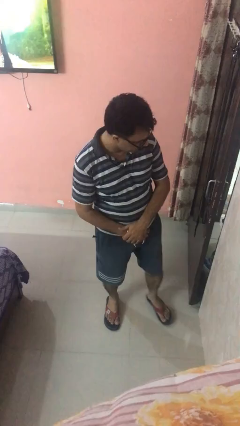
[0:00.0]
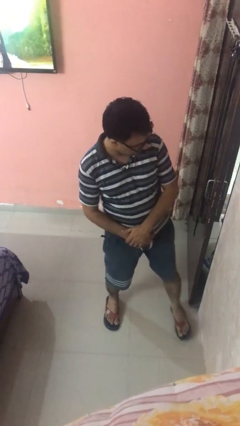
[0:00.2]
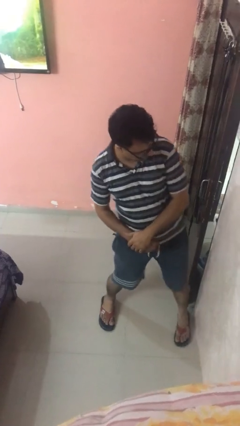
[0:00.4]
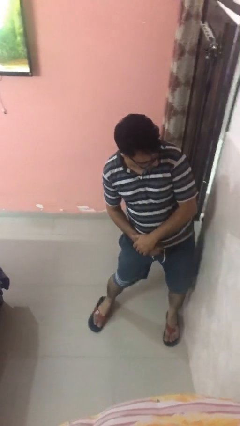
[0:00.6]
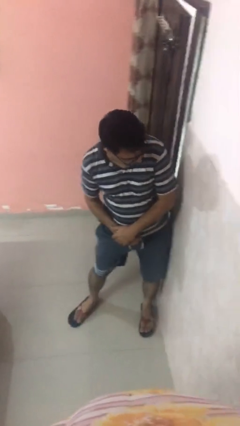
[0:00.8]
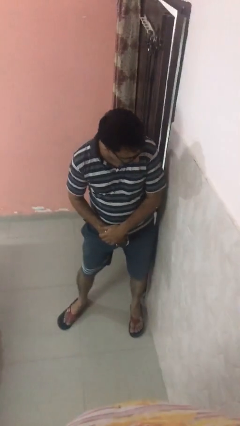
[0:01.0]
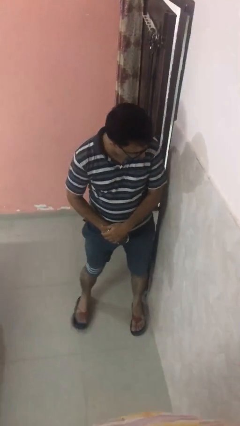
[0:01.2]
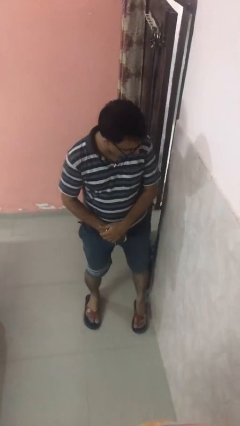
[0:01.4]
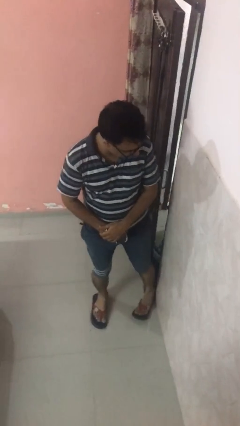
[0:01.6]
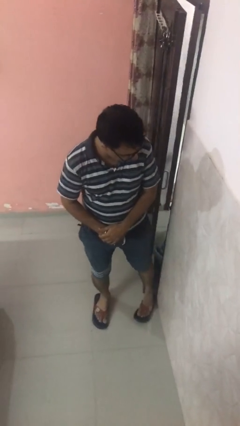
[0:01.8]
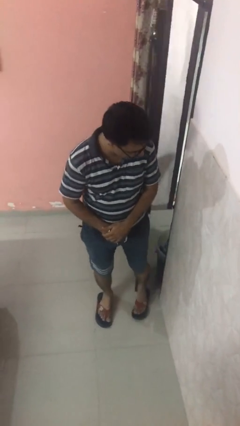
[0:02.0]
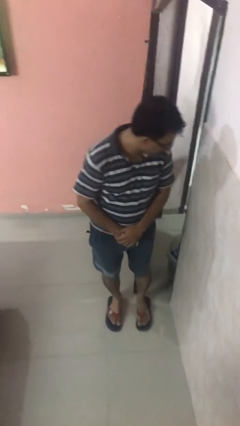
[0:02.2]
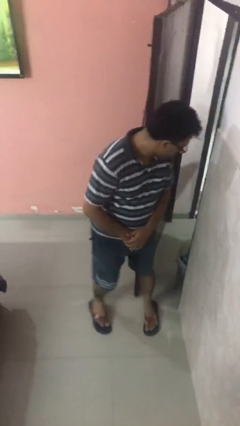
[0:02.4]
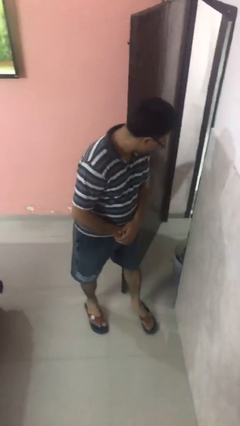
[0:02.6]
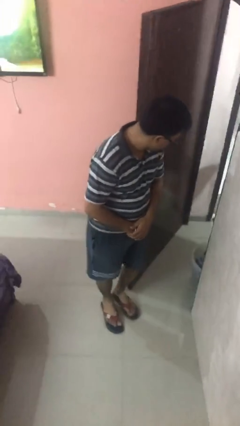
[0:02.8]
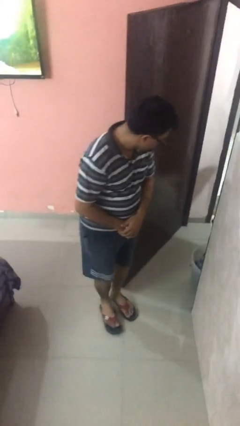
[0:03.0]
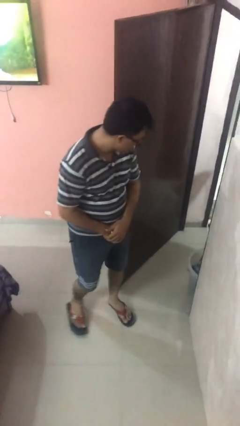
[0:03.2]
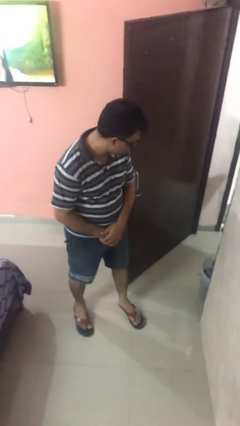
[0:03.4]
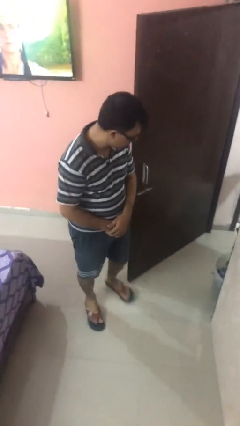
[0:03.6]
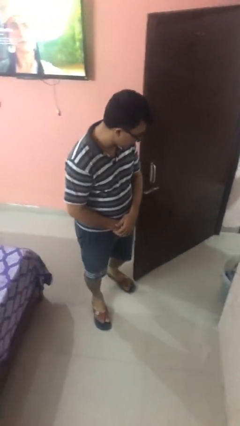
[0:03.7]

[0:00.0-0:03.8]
person opens facility door

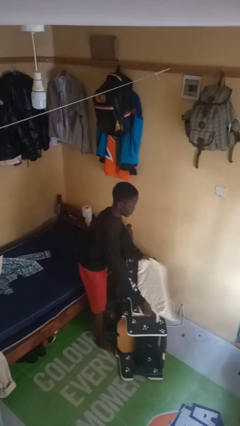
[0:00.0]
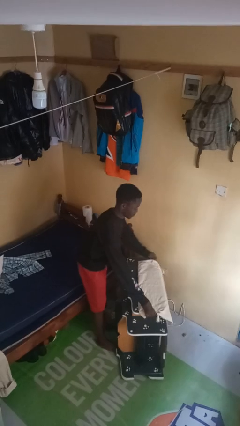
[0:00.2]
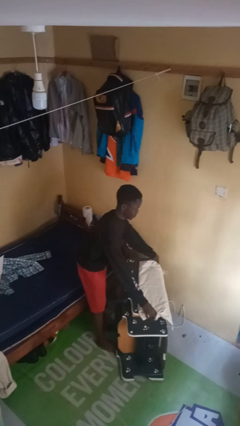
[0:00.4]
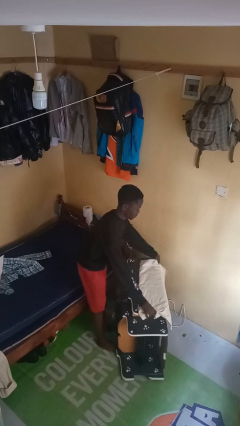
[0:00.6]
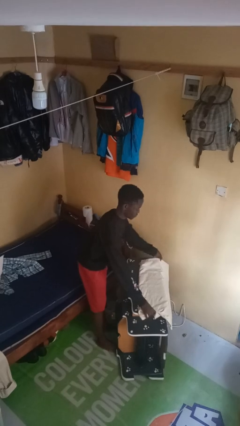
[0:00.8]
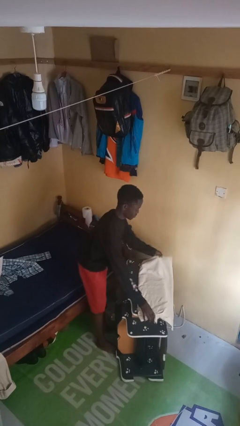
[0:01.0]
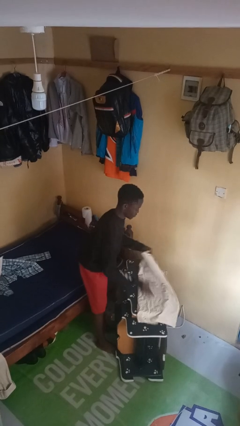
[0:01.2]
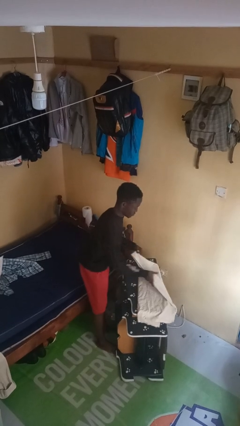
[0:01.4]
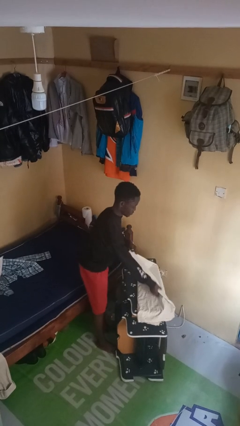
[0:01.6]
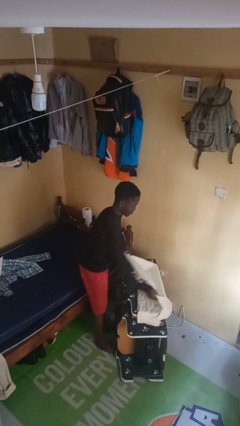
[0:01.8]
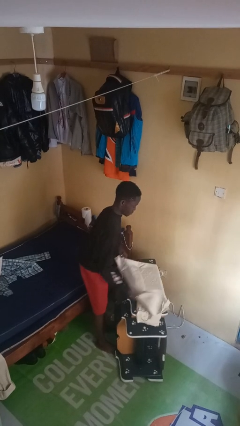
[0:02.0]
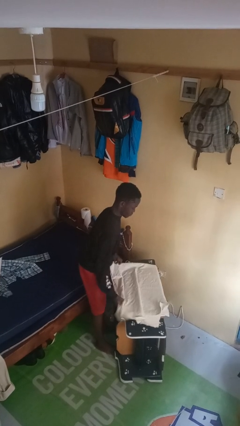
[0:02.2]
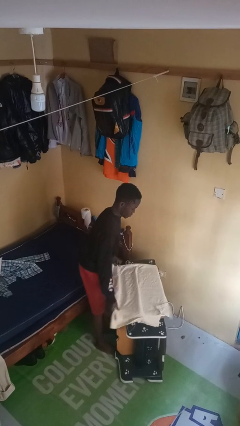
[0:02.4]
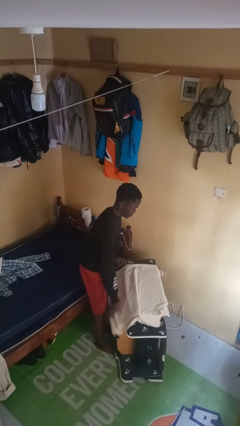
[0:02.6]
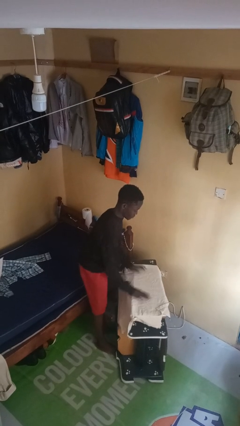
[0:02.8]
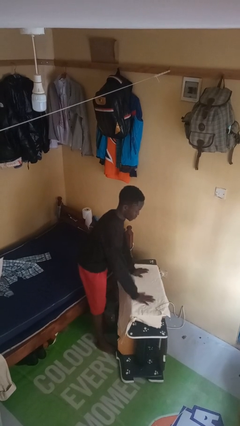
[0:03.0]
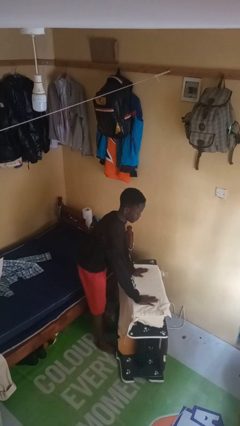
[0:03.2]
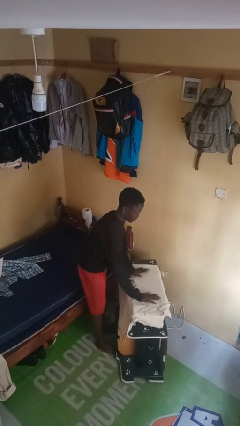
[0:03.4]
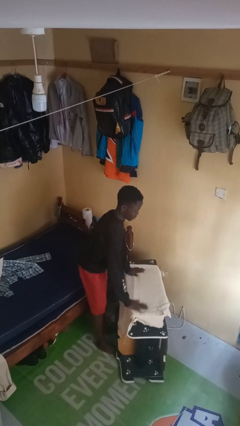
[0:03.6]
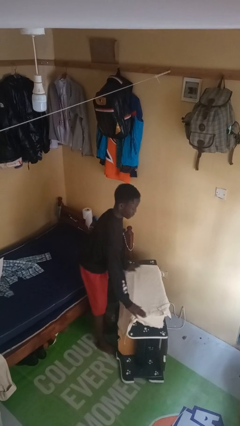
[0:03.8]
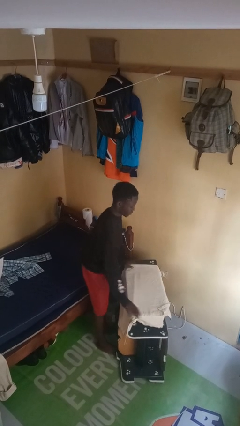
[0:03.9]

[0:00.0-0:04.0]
person spreads tablecloth

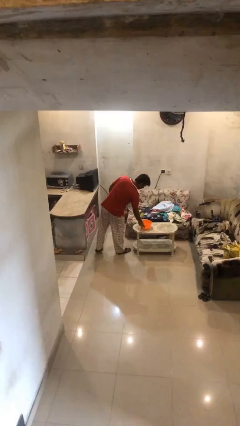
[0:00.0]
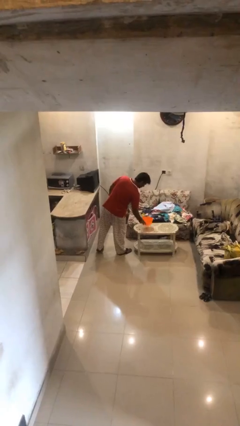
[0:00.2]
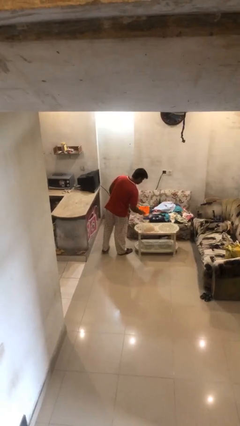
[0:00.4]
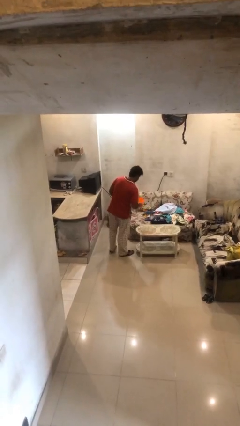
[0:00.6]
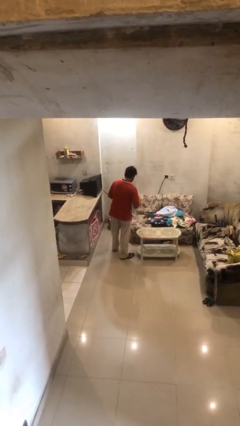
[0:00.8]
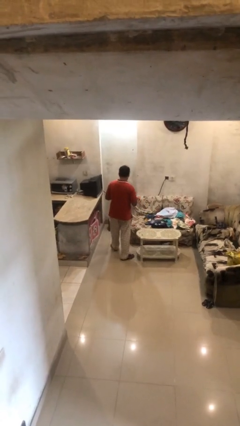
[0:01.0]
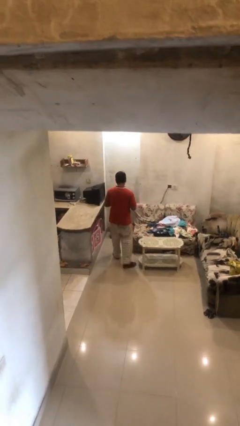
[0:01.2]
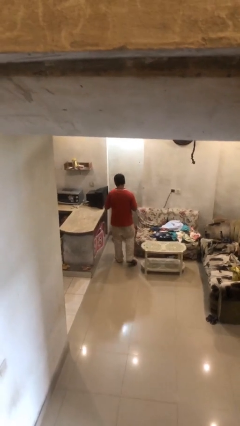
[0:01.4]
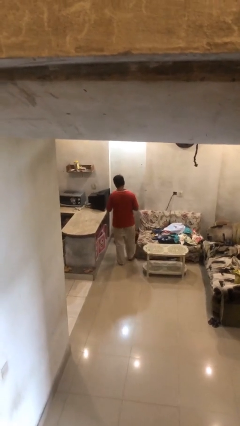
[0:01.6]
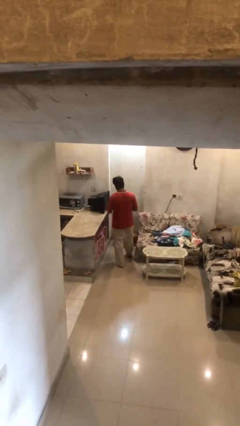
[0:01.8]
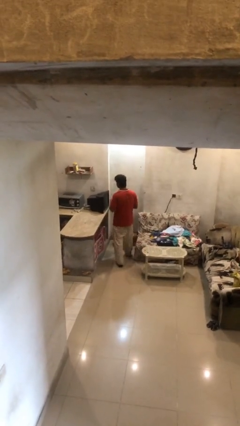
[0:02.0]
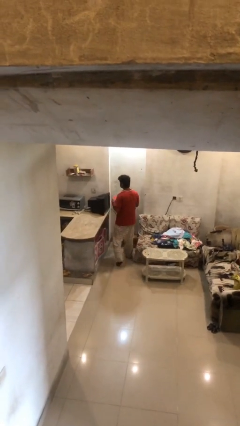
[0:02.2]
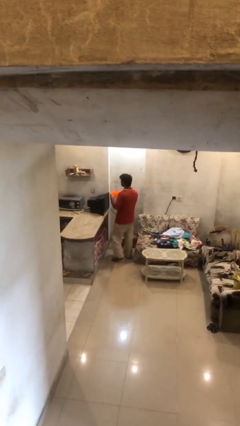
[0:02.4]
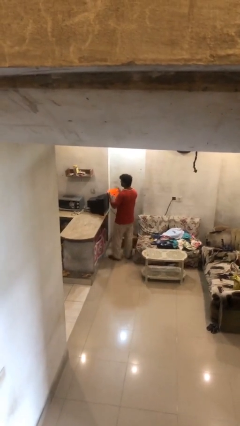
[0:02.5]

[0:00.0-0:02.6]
person picks up object from table

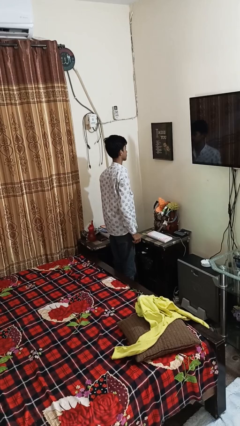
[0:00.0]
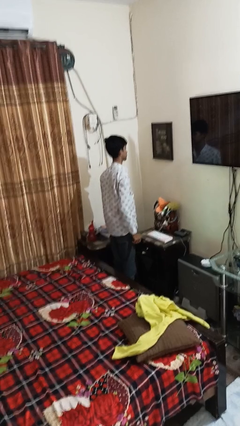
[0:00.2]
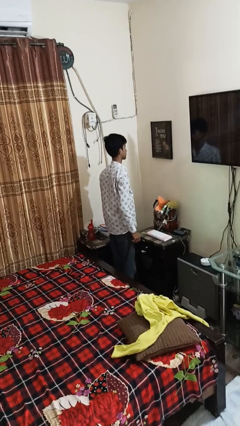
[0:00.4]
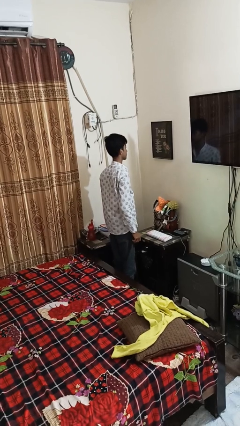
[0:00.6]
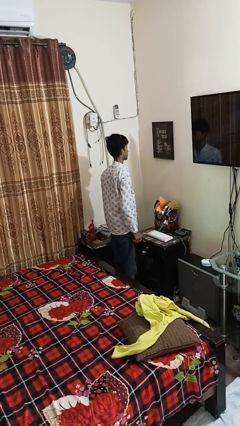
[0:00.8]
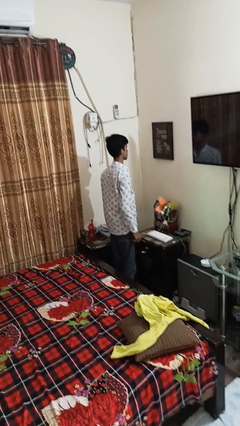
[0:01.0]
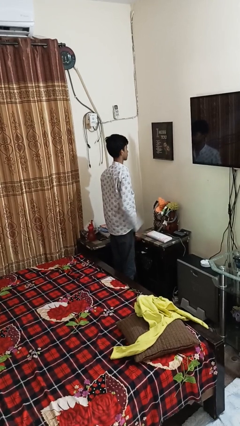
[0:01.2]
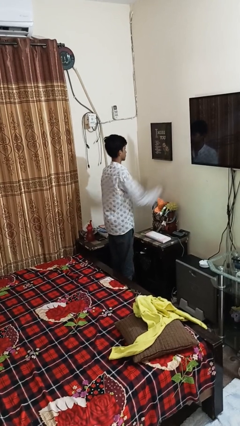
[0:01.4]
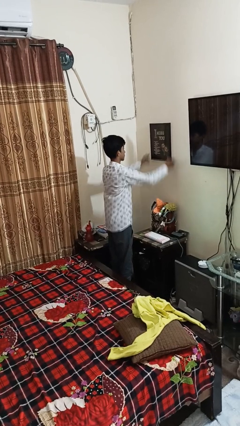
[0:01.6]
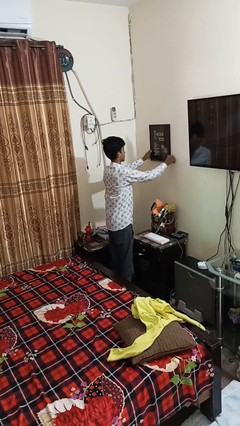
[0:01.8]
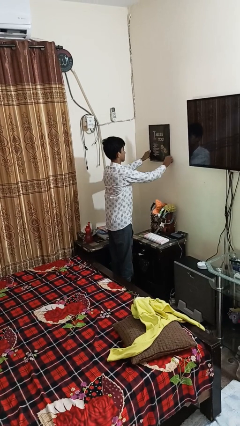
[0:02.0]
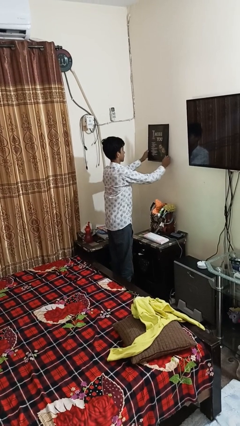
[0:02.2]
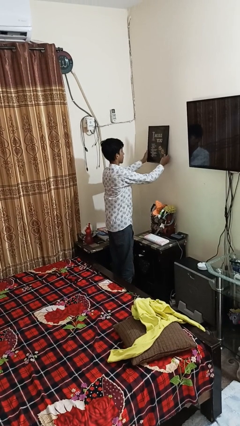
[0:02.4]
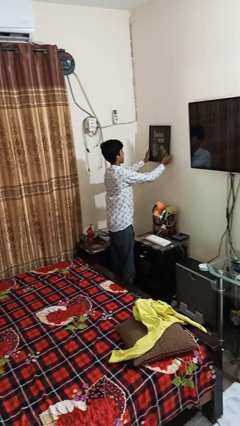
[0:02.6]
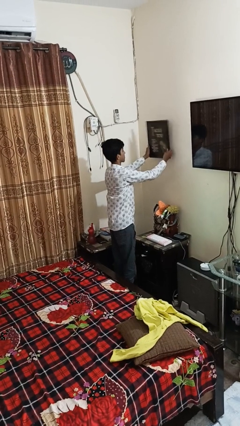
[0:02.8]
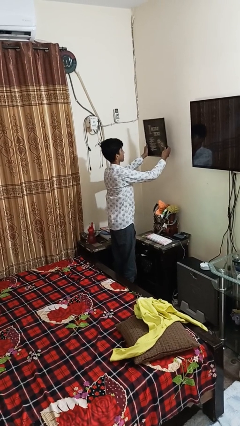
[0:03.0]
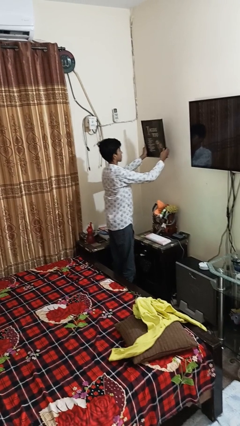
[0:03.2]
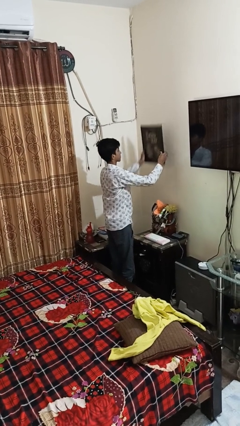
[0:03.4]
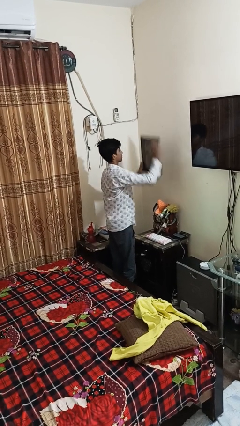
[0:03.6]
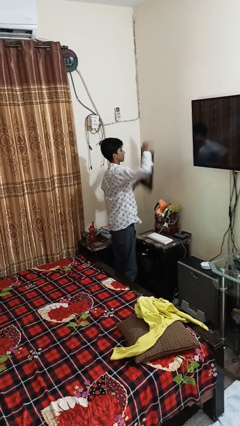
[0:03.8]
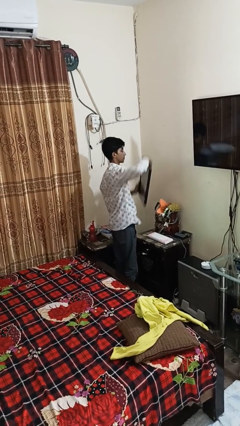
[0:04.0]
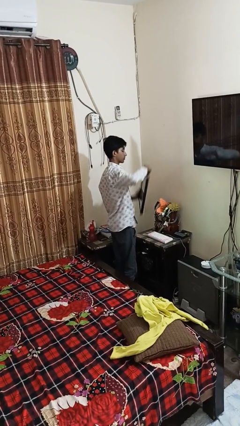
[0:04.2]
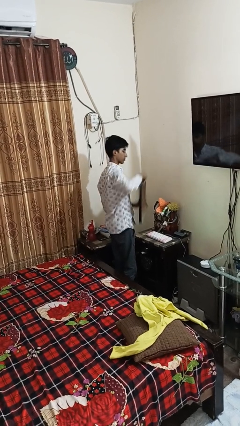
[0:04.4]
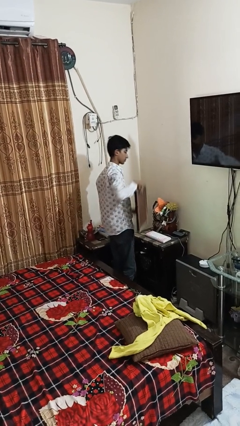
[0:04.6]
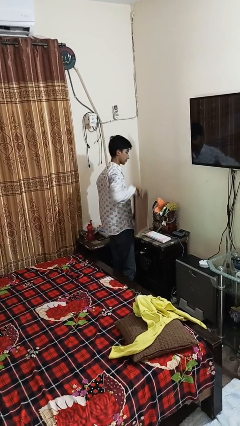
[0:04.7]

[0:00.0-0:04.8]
person takes down picture frame

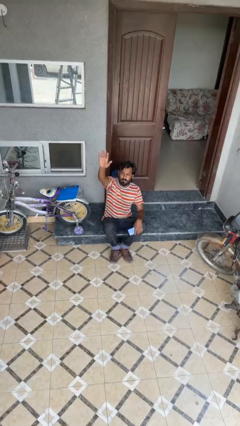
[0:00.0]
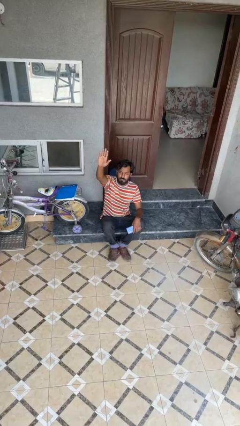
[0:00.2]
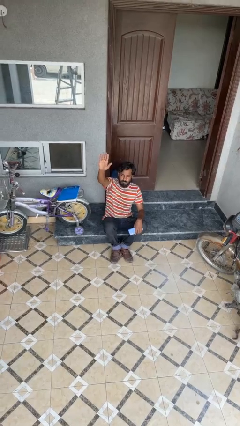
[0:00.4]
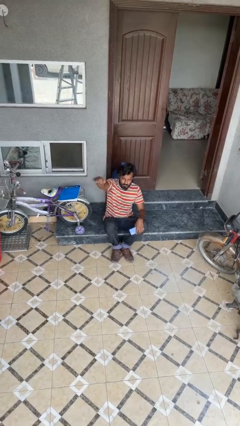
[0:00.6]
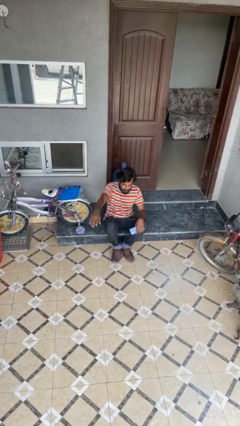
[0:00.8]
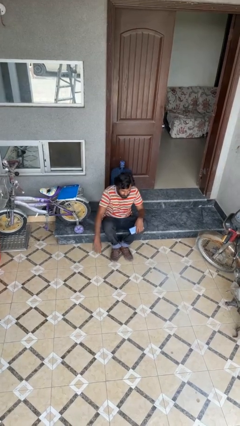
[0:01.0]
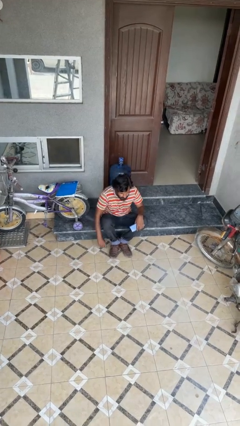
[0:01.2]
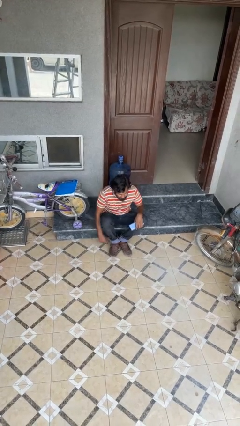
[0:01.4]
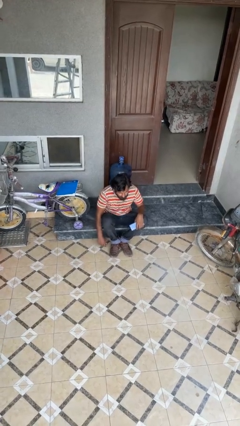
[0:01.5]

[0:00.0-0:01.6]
person gestures lower hand

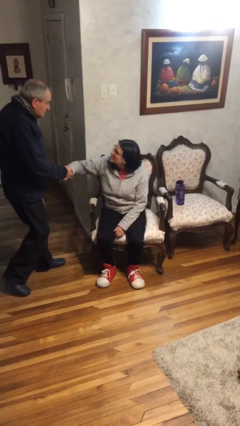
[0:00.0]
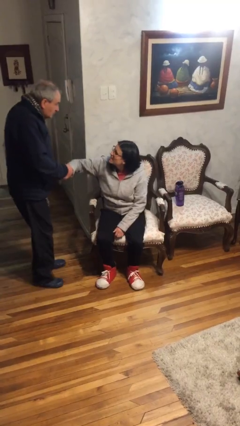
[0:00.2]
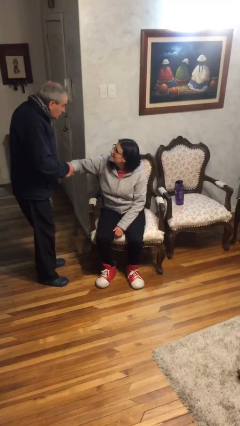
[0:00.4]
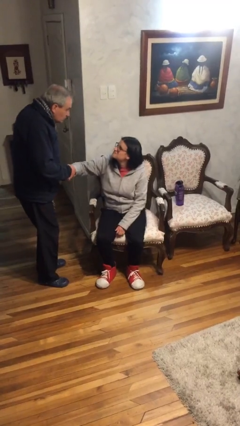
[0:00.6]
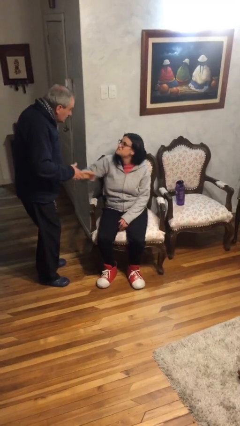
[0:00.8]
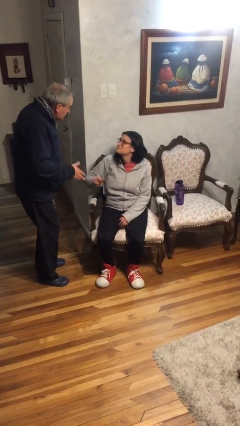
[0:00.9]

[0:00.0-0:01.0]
person shakes hand
